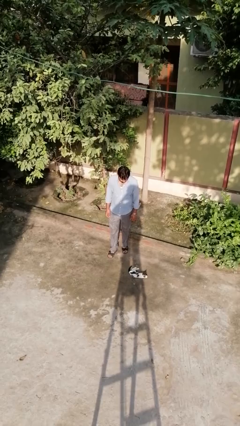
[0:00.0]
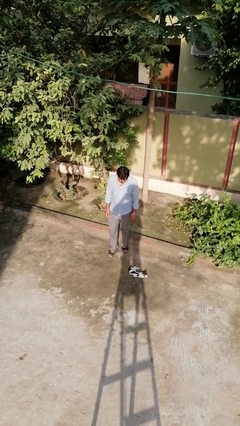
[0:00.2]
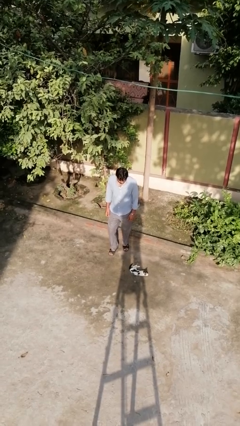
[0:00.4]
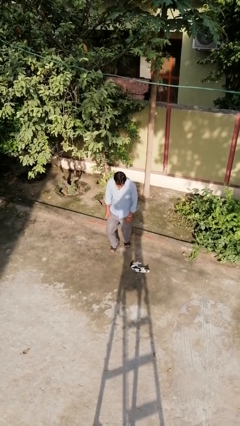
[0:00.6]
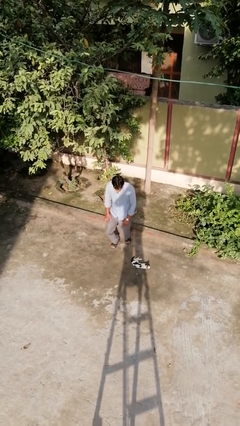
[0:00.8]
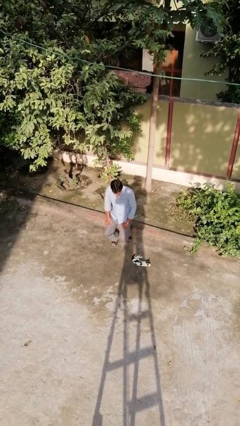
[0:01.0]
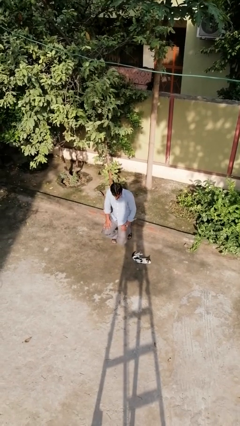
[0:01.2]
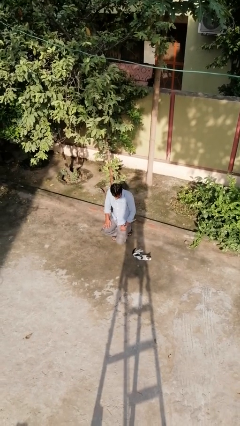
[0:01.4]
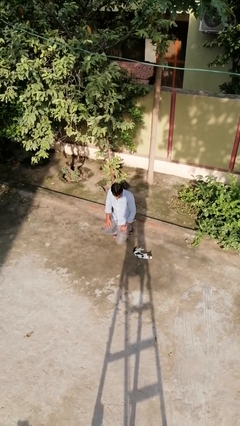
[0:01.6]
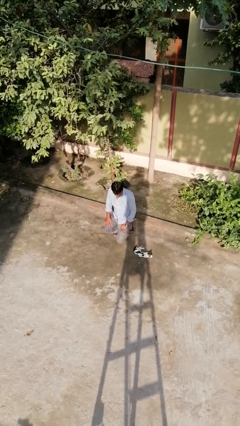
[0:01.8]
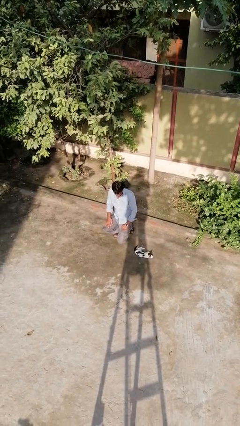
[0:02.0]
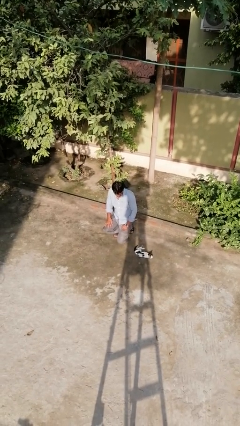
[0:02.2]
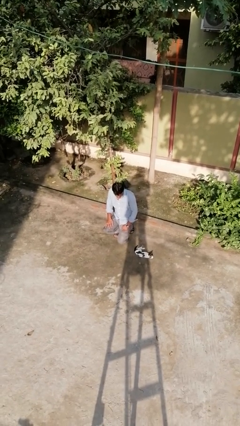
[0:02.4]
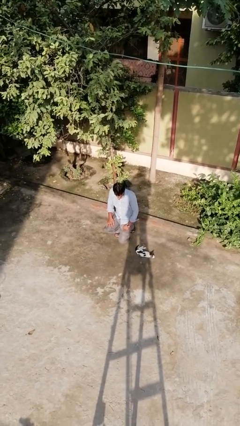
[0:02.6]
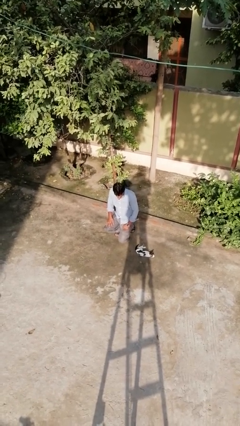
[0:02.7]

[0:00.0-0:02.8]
person kneels

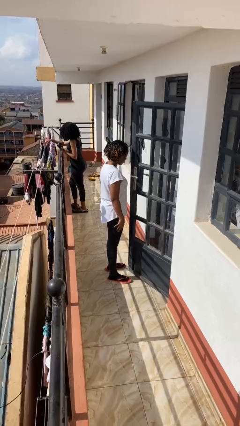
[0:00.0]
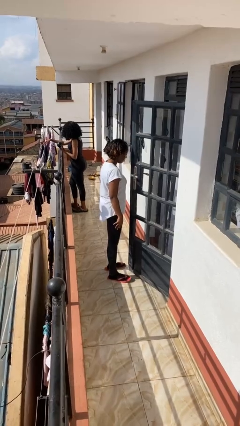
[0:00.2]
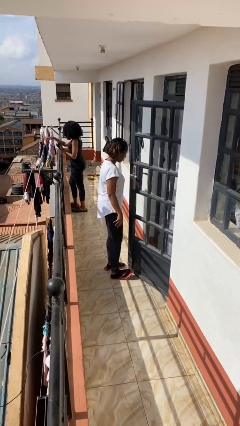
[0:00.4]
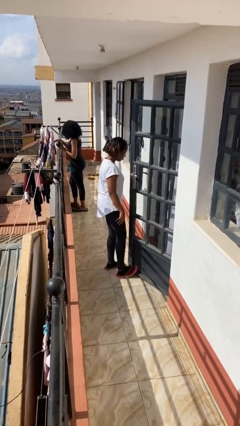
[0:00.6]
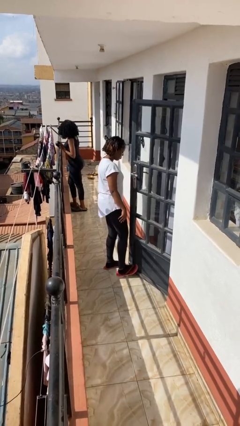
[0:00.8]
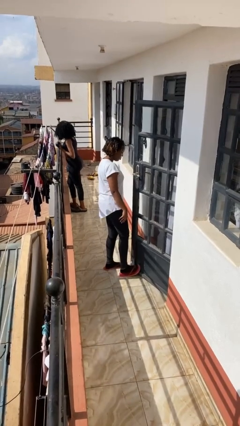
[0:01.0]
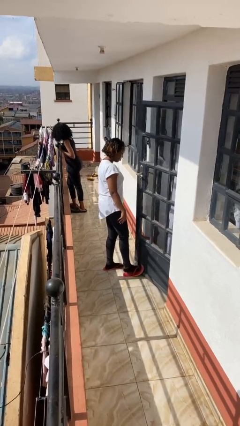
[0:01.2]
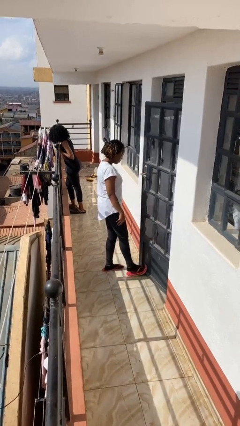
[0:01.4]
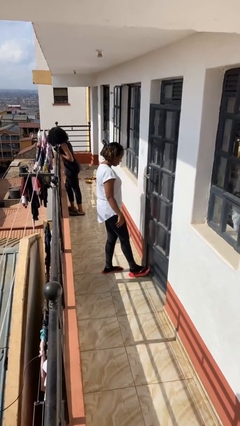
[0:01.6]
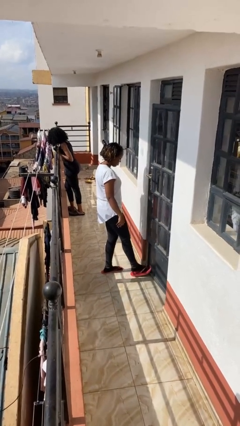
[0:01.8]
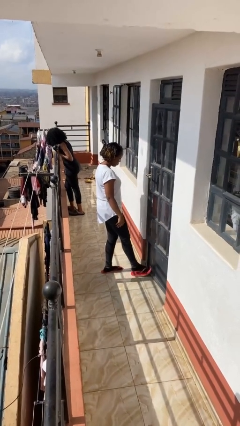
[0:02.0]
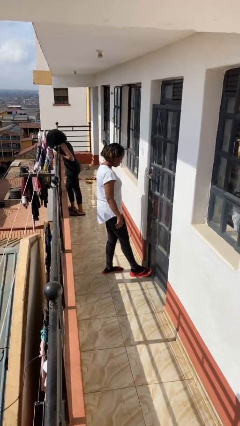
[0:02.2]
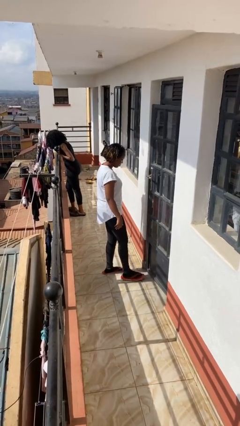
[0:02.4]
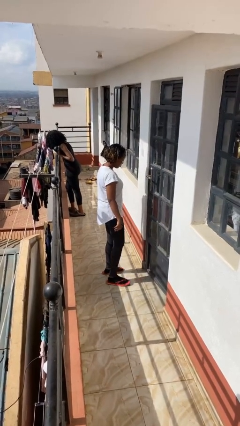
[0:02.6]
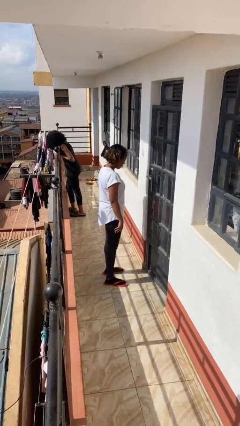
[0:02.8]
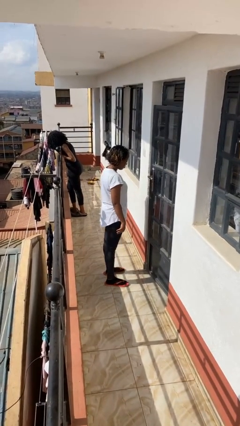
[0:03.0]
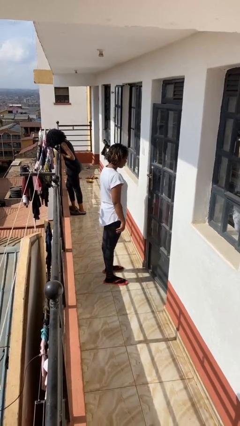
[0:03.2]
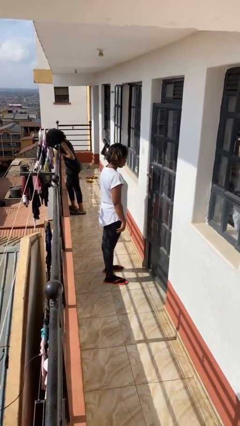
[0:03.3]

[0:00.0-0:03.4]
person closes door with foot

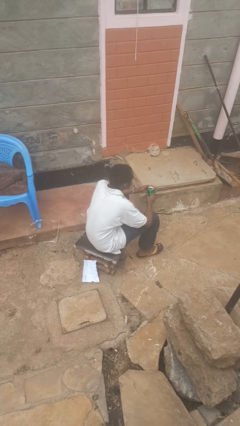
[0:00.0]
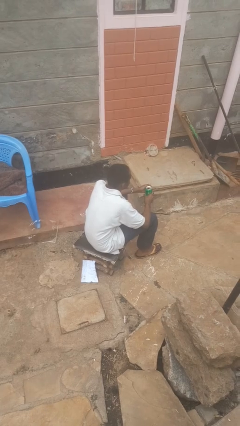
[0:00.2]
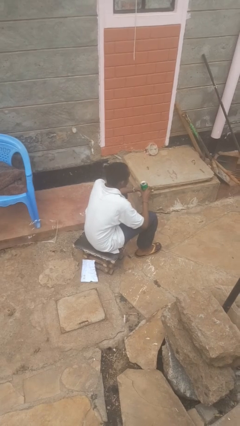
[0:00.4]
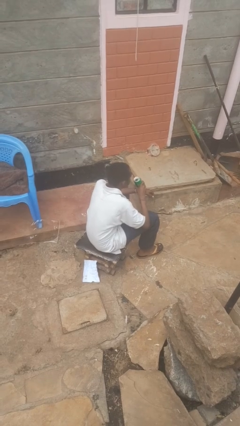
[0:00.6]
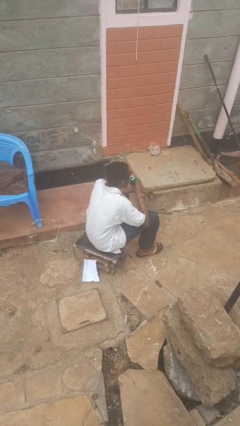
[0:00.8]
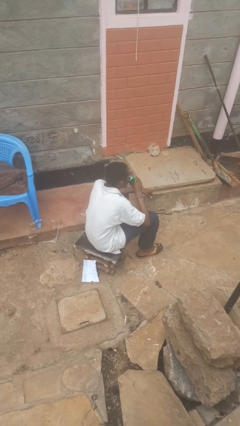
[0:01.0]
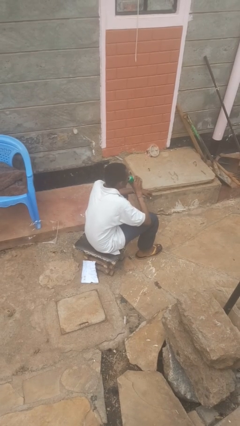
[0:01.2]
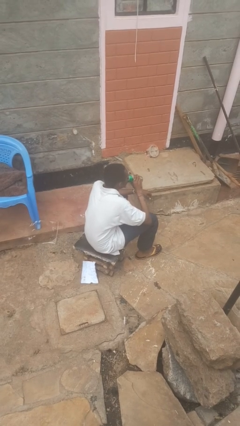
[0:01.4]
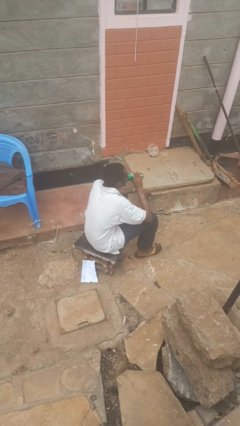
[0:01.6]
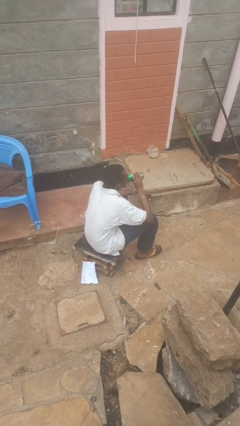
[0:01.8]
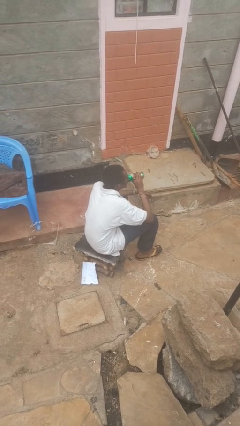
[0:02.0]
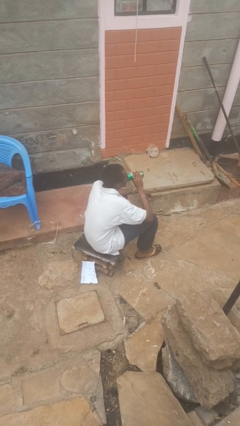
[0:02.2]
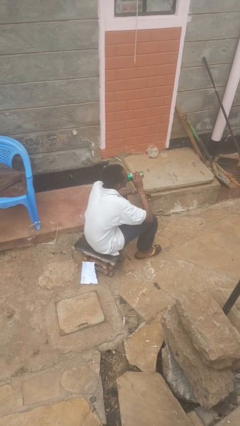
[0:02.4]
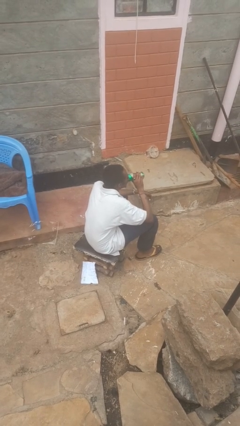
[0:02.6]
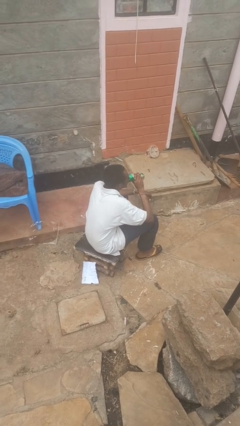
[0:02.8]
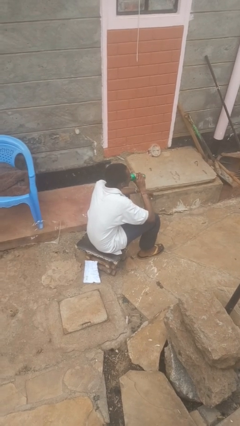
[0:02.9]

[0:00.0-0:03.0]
person drinks from beverage can

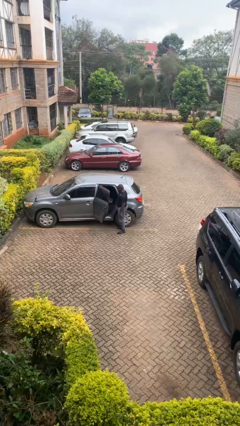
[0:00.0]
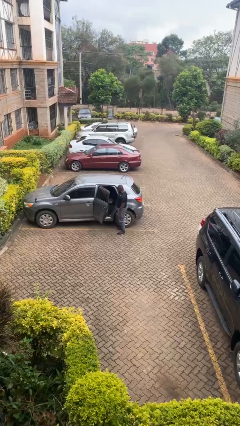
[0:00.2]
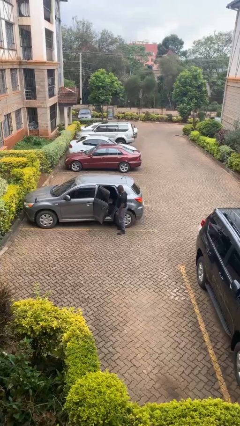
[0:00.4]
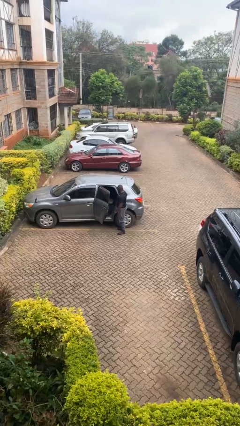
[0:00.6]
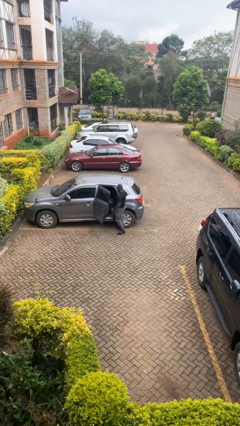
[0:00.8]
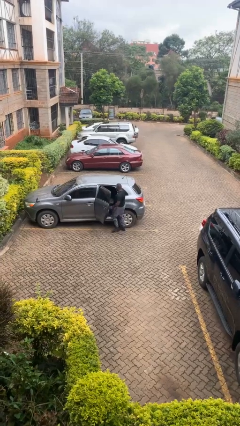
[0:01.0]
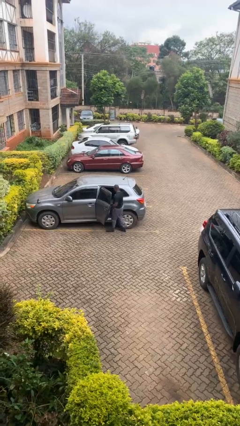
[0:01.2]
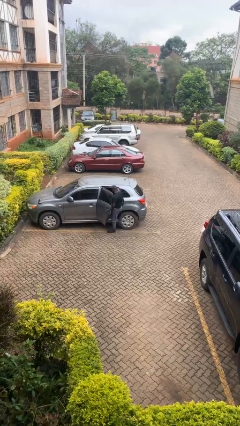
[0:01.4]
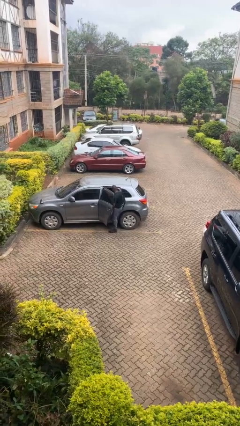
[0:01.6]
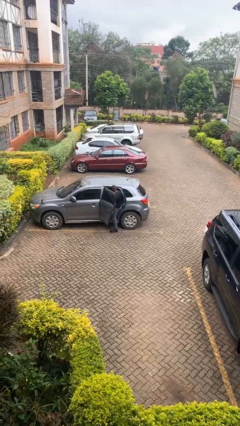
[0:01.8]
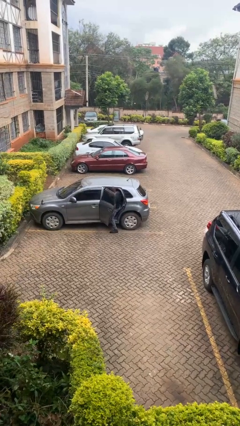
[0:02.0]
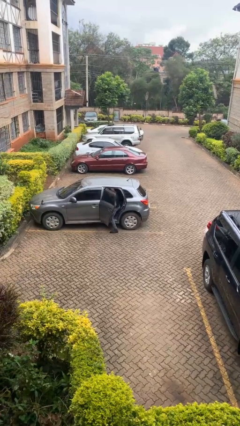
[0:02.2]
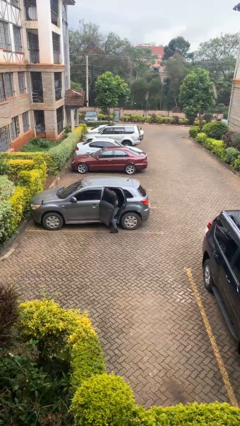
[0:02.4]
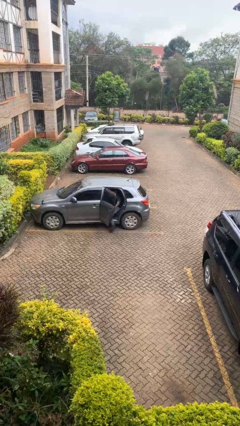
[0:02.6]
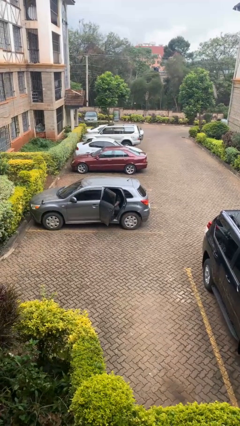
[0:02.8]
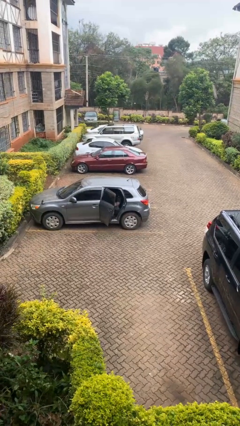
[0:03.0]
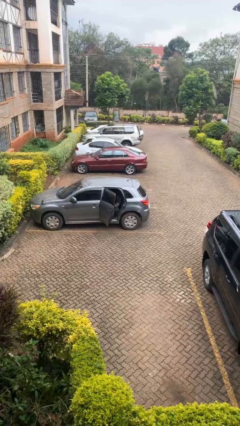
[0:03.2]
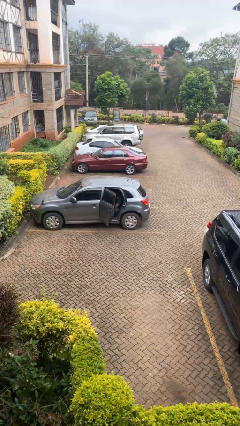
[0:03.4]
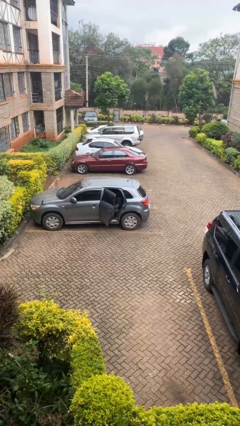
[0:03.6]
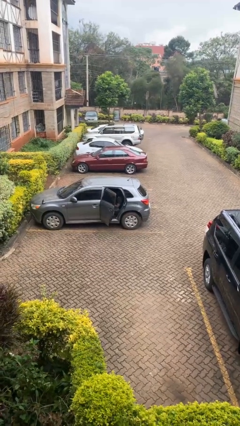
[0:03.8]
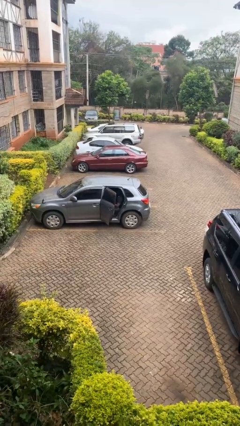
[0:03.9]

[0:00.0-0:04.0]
person enters car

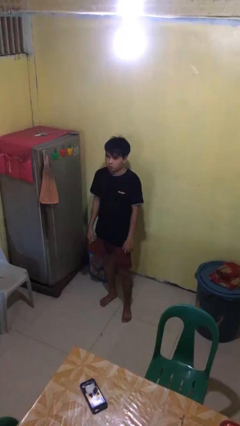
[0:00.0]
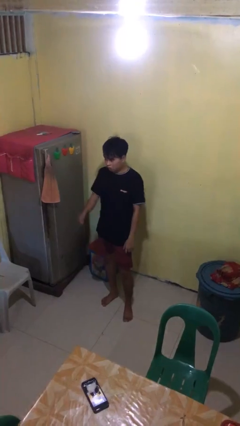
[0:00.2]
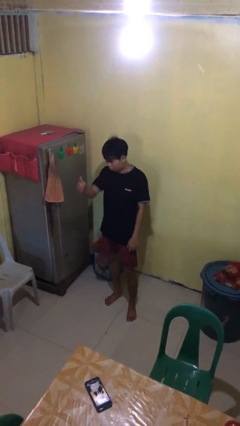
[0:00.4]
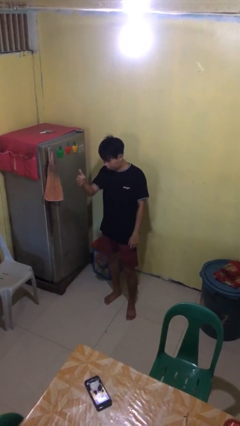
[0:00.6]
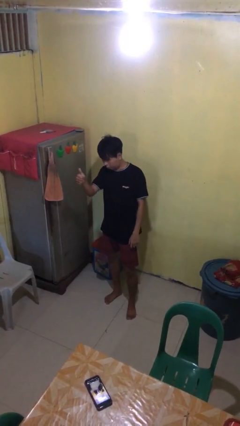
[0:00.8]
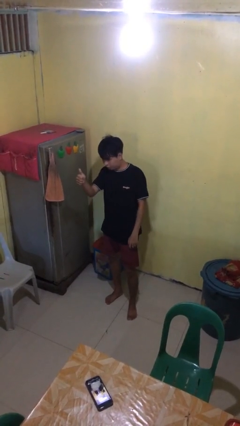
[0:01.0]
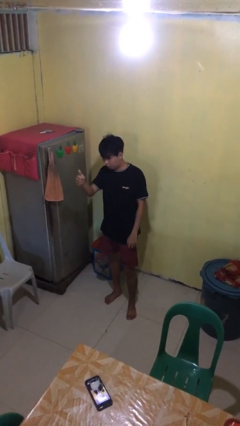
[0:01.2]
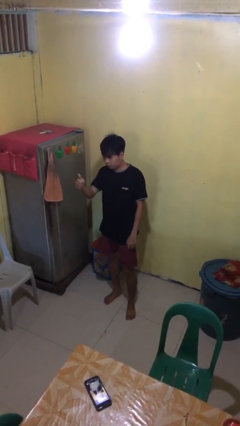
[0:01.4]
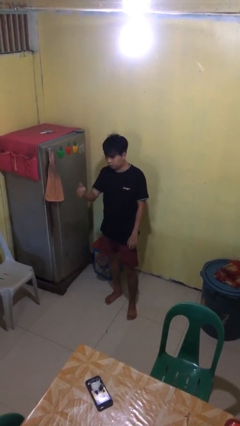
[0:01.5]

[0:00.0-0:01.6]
person gestures thumbs up

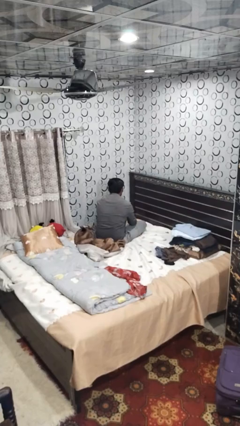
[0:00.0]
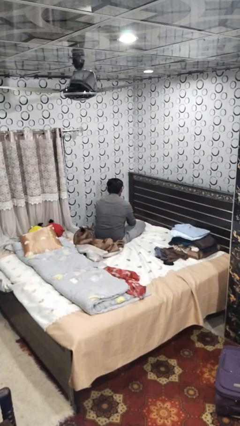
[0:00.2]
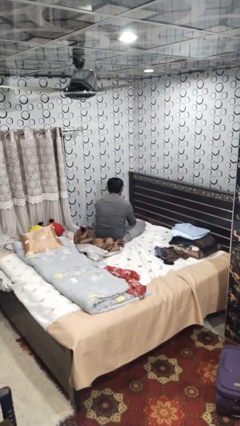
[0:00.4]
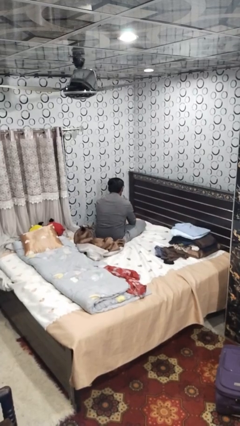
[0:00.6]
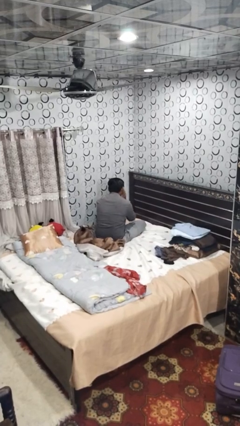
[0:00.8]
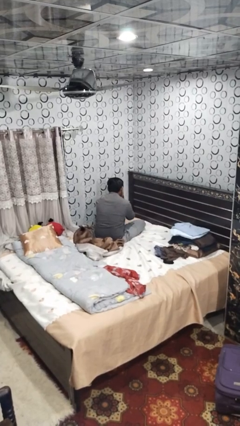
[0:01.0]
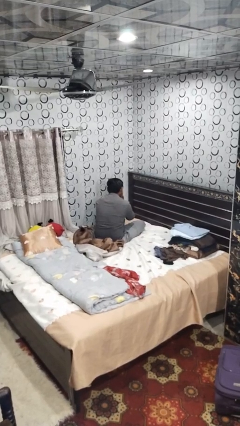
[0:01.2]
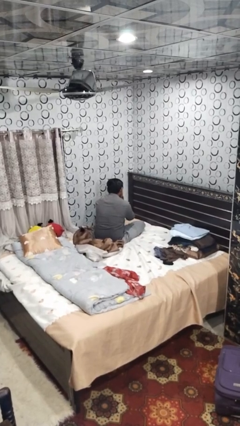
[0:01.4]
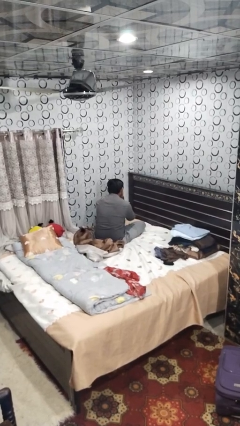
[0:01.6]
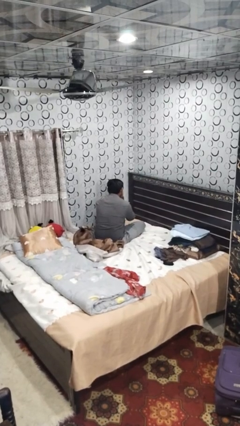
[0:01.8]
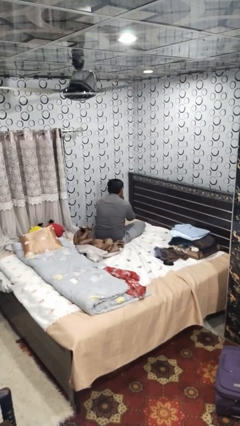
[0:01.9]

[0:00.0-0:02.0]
person covers face with hands

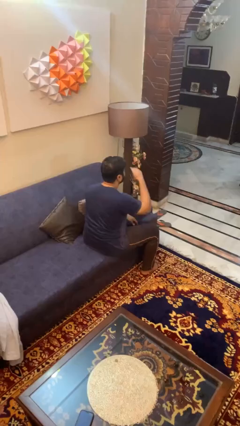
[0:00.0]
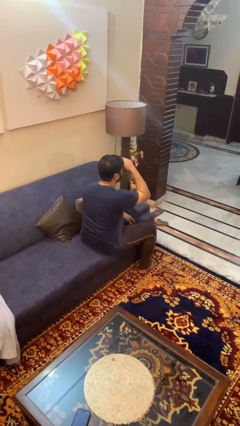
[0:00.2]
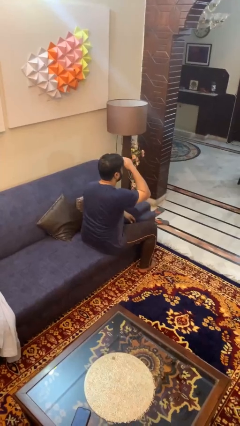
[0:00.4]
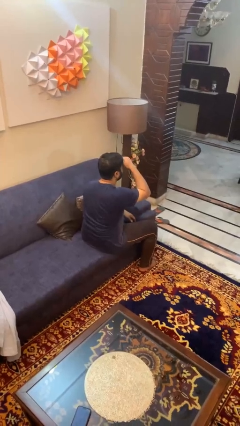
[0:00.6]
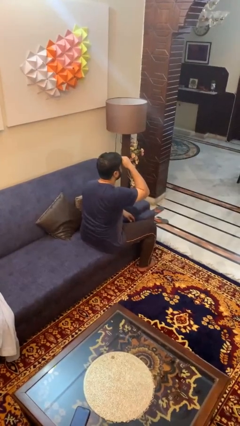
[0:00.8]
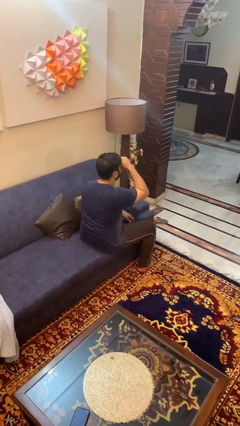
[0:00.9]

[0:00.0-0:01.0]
person shades eyes
